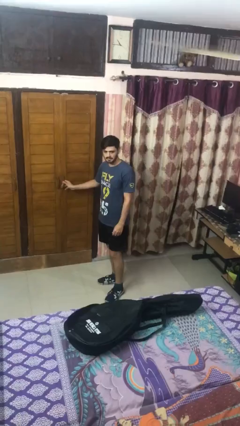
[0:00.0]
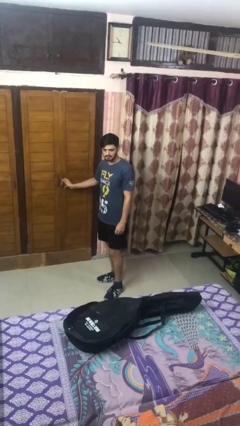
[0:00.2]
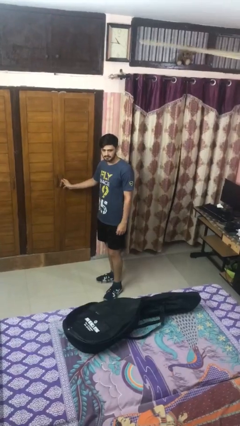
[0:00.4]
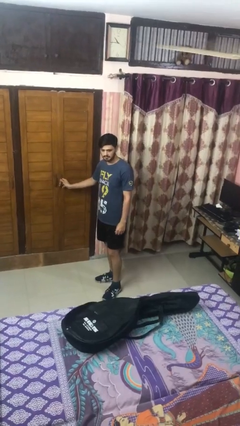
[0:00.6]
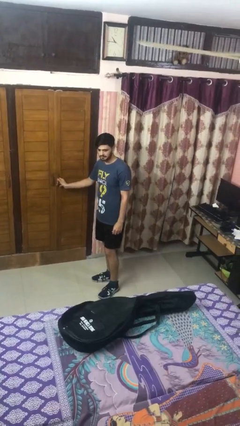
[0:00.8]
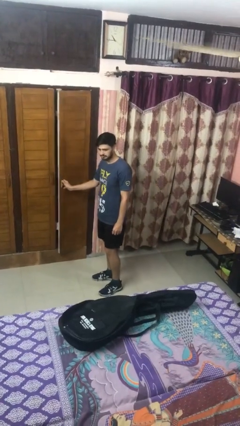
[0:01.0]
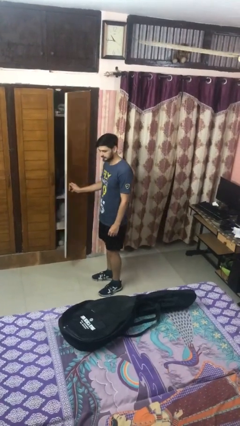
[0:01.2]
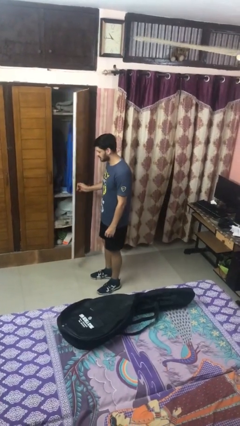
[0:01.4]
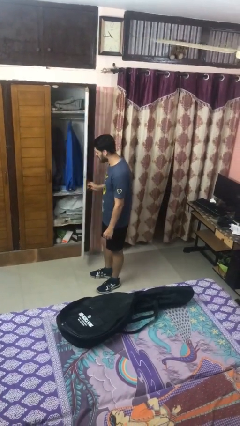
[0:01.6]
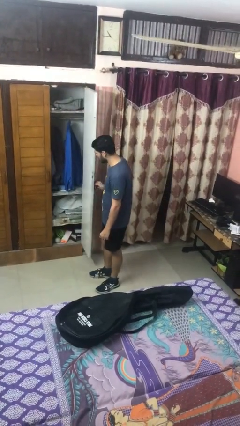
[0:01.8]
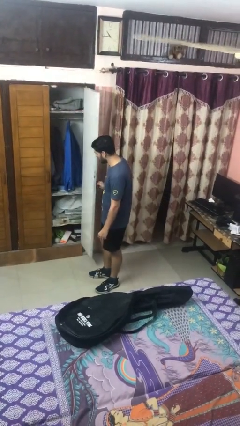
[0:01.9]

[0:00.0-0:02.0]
person opens closet door

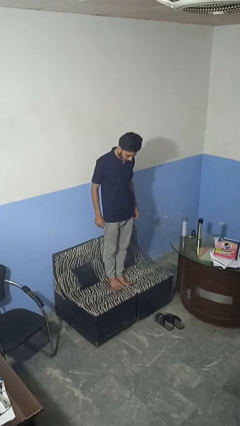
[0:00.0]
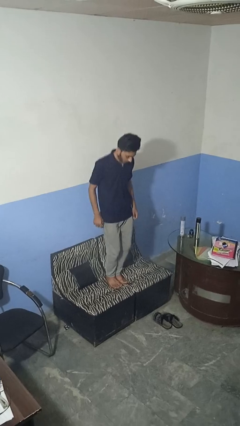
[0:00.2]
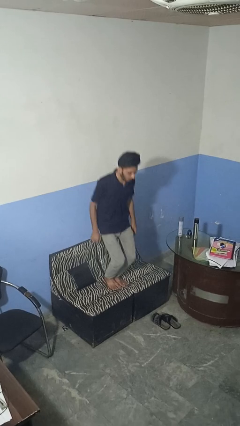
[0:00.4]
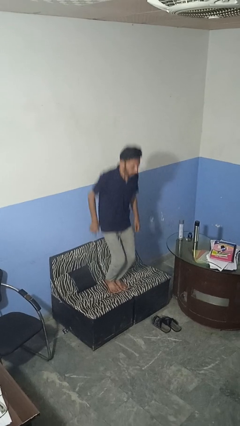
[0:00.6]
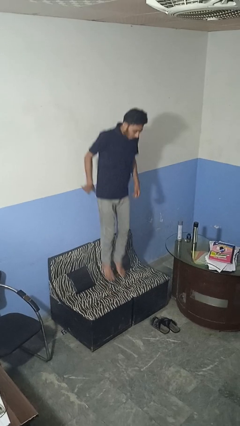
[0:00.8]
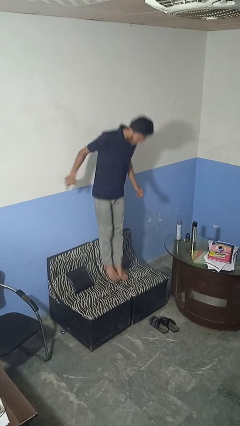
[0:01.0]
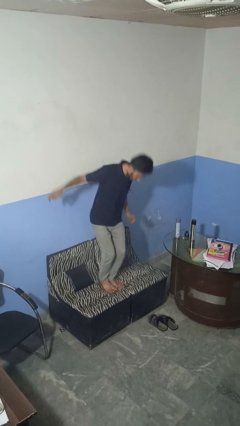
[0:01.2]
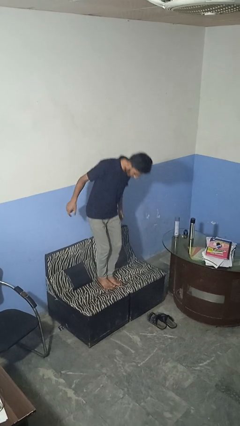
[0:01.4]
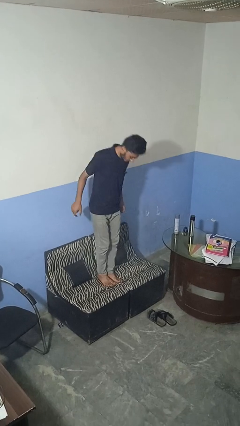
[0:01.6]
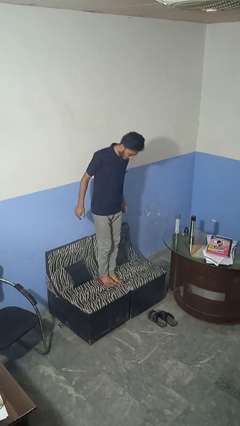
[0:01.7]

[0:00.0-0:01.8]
person jumps on couch

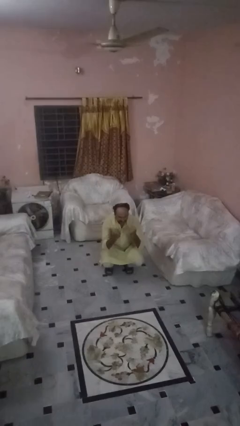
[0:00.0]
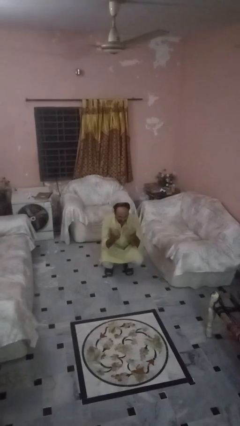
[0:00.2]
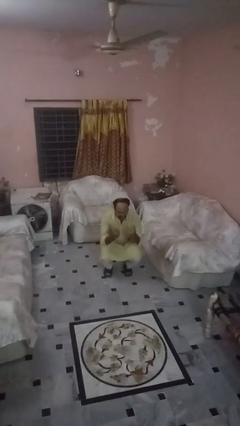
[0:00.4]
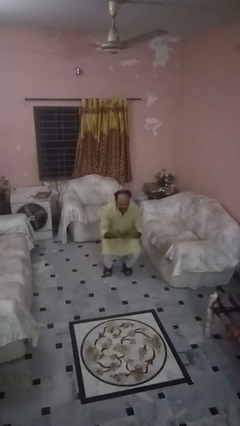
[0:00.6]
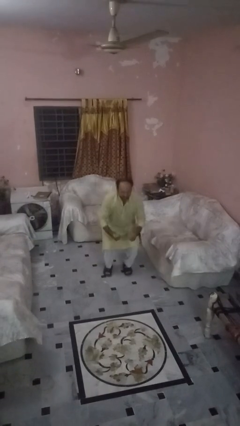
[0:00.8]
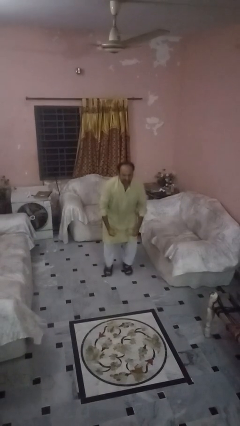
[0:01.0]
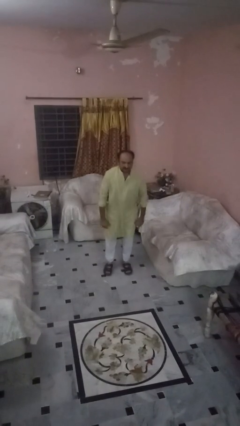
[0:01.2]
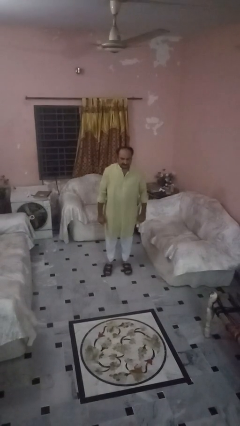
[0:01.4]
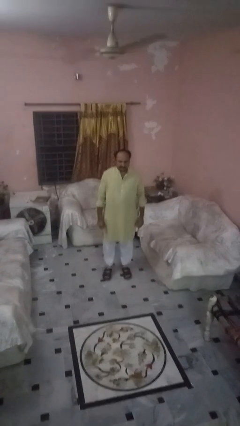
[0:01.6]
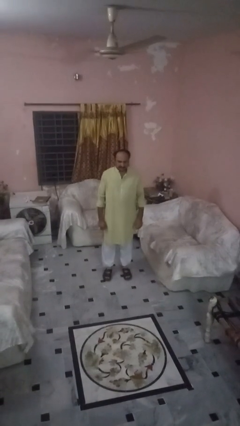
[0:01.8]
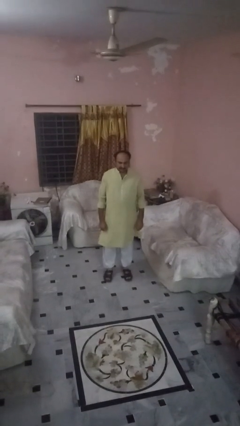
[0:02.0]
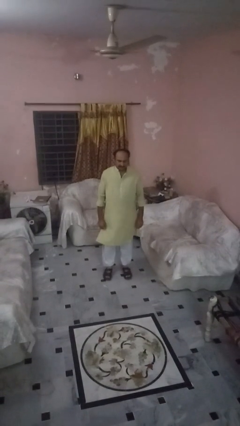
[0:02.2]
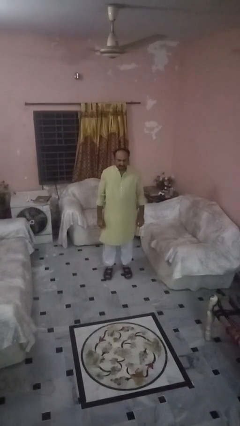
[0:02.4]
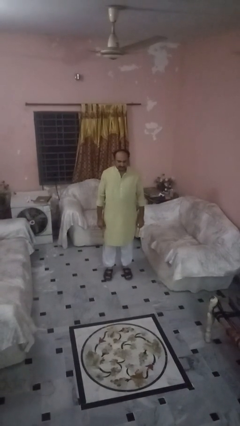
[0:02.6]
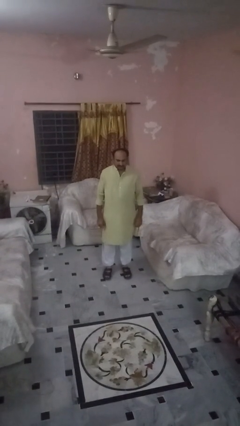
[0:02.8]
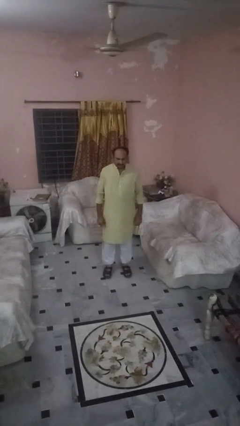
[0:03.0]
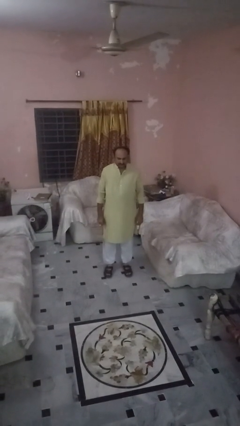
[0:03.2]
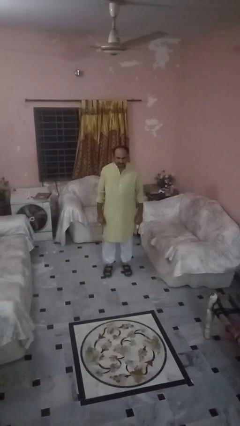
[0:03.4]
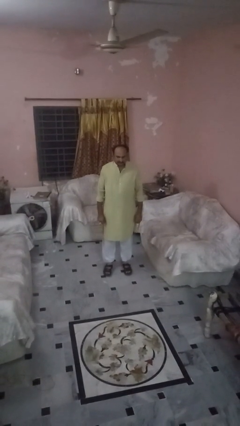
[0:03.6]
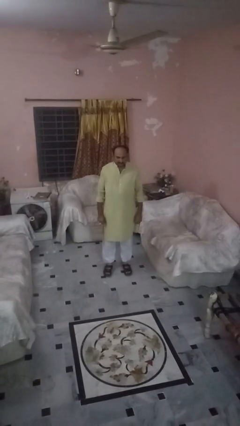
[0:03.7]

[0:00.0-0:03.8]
person stands up

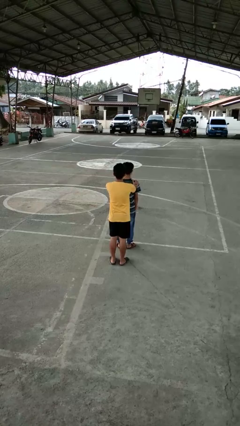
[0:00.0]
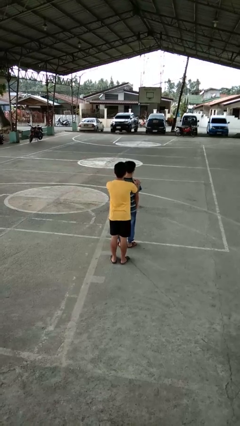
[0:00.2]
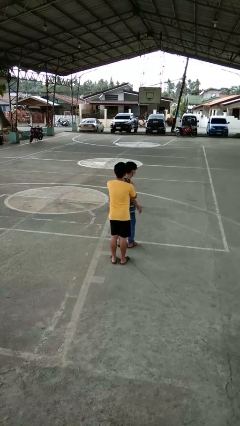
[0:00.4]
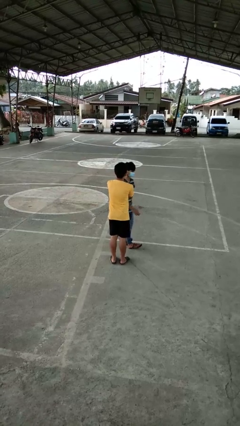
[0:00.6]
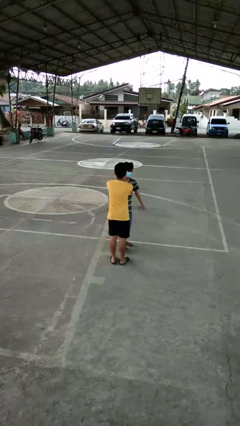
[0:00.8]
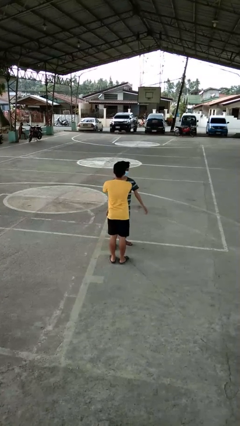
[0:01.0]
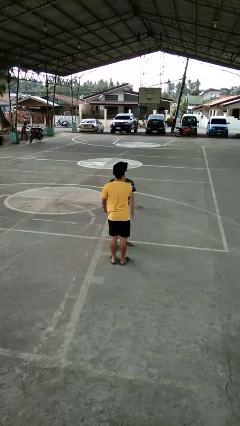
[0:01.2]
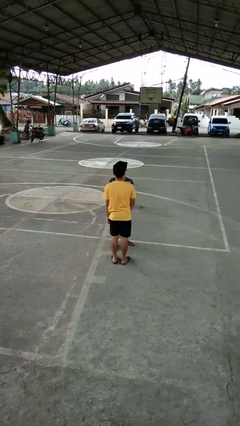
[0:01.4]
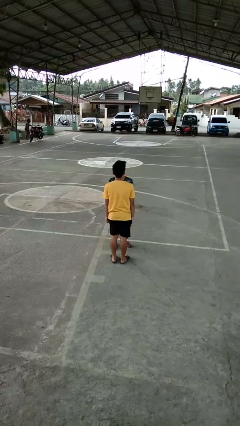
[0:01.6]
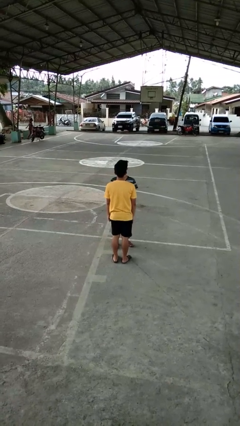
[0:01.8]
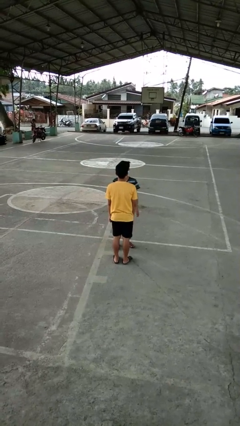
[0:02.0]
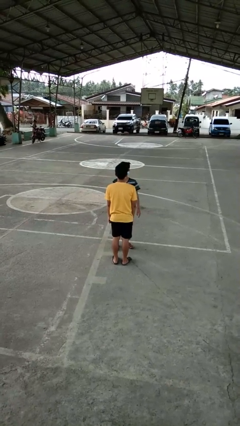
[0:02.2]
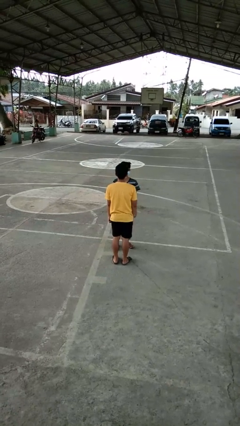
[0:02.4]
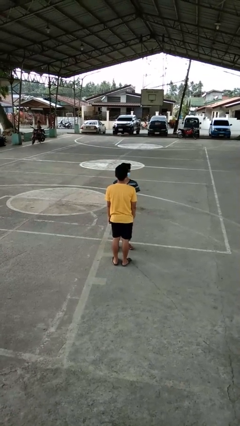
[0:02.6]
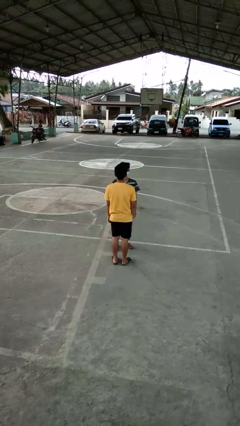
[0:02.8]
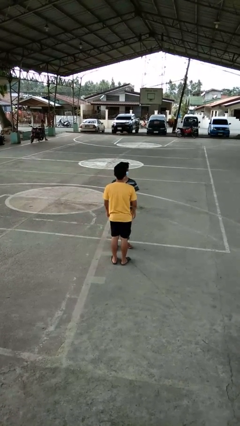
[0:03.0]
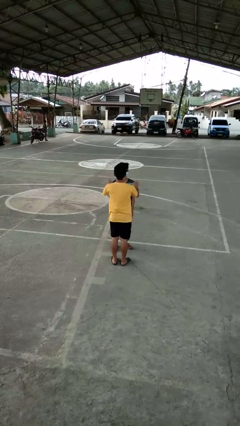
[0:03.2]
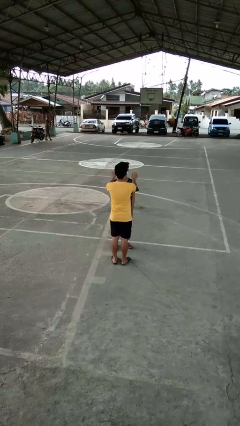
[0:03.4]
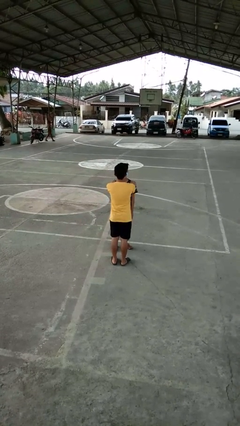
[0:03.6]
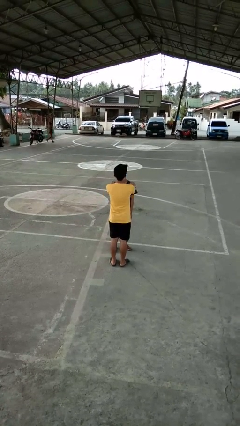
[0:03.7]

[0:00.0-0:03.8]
person spins person around

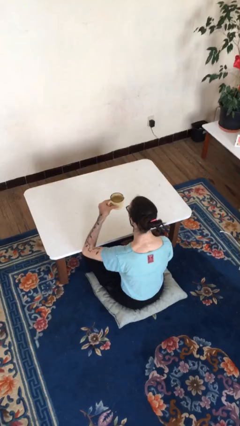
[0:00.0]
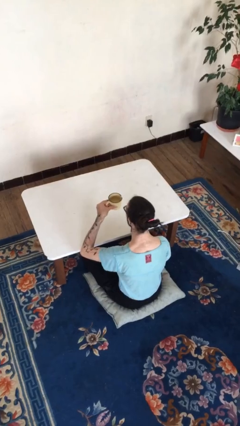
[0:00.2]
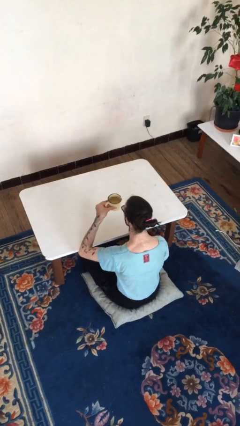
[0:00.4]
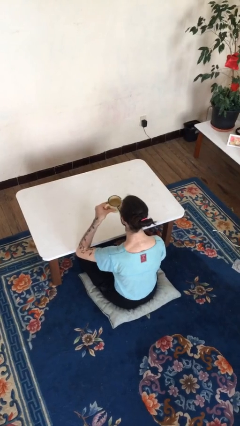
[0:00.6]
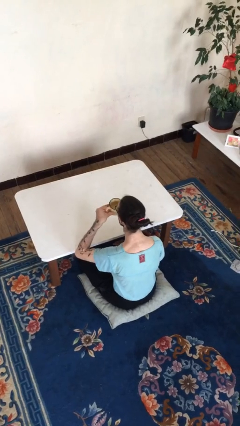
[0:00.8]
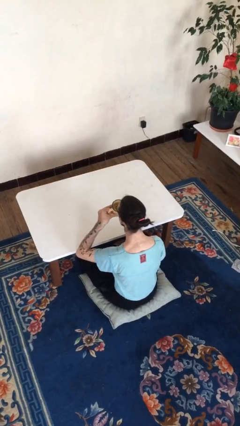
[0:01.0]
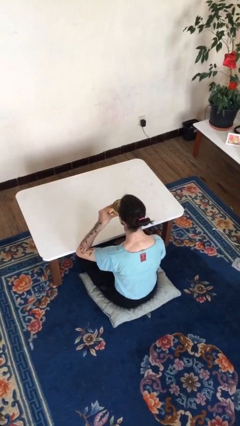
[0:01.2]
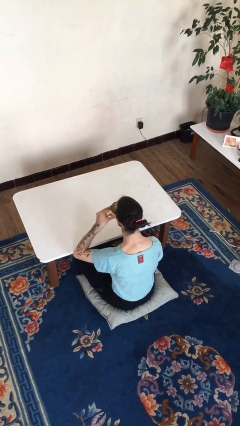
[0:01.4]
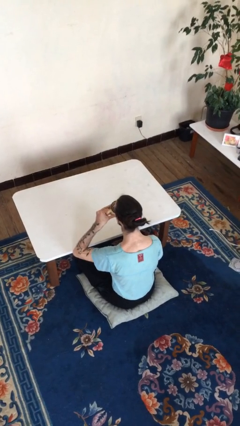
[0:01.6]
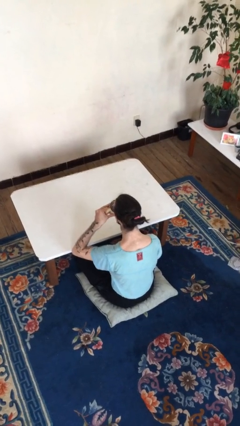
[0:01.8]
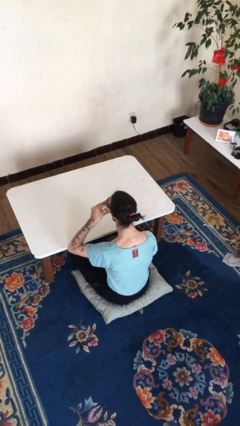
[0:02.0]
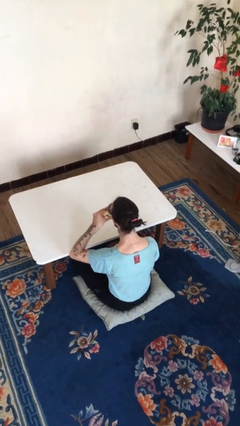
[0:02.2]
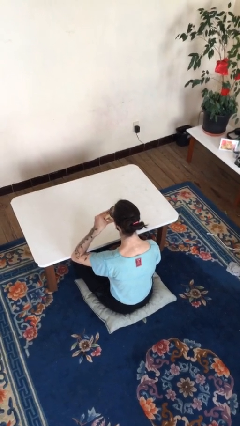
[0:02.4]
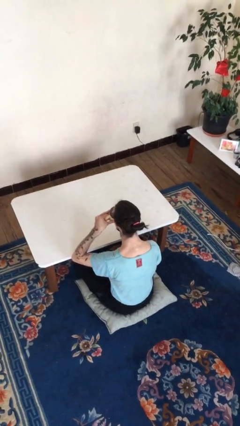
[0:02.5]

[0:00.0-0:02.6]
person drinks from mug

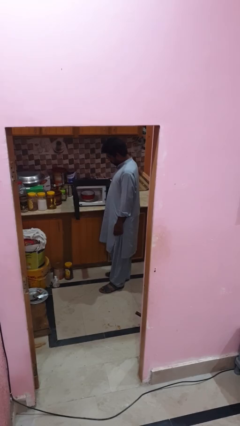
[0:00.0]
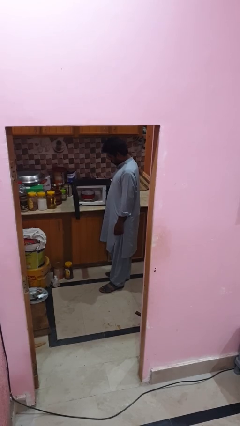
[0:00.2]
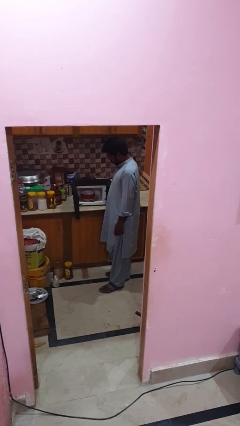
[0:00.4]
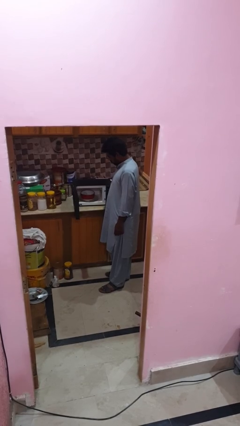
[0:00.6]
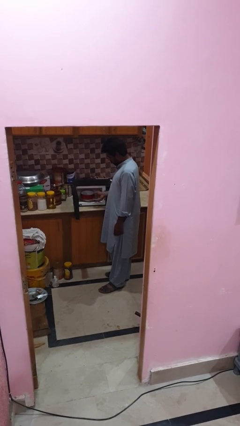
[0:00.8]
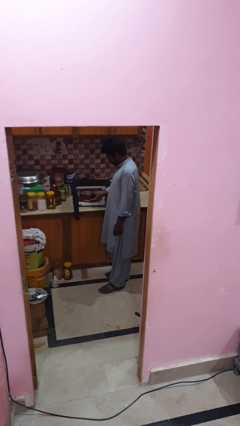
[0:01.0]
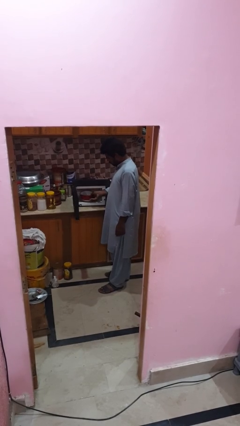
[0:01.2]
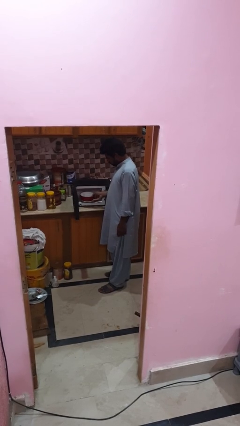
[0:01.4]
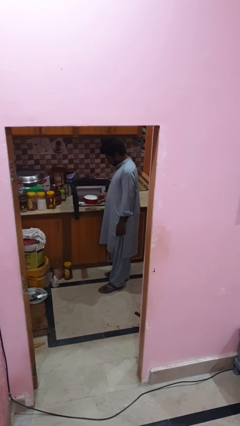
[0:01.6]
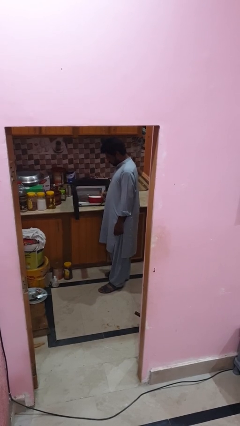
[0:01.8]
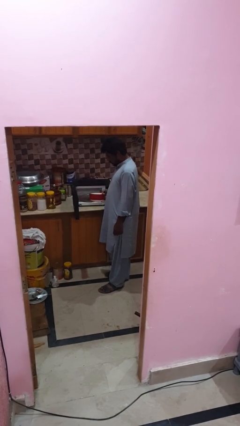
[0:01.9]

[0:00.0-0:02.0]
person takes object from microwave

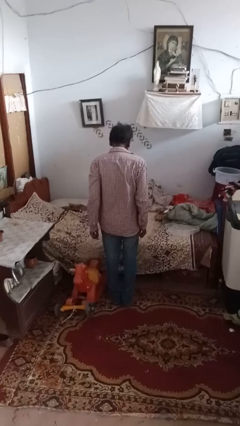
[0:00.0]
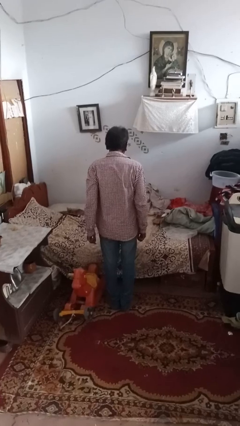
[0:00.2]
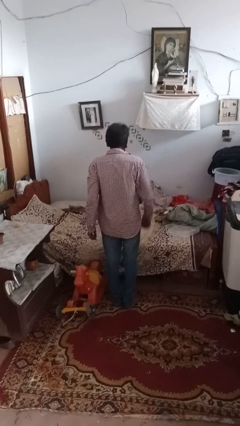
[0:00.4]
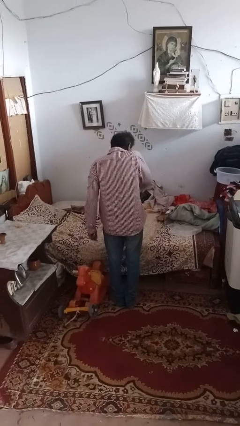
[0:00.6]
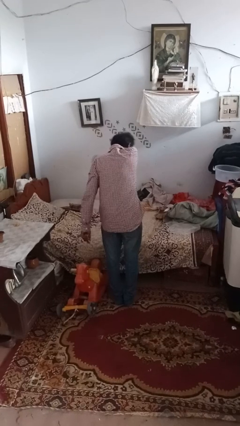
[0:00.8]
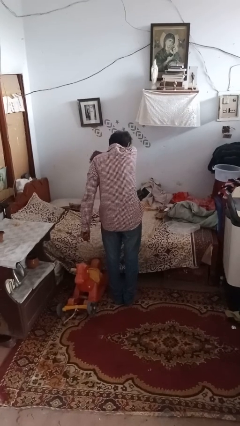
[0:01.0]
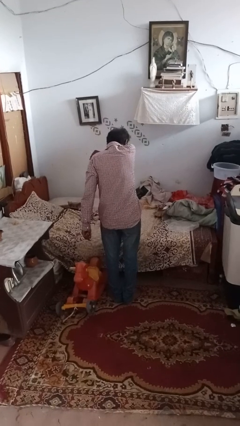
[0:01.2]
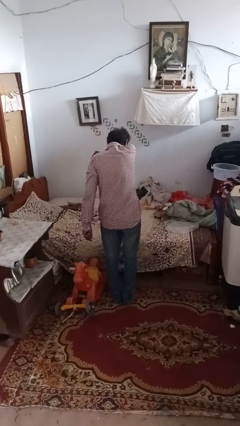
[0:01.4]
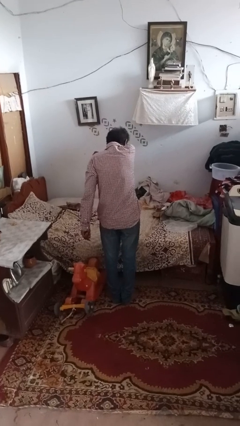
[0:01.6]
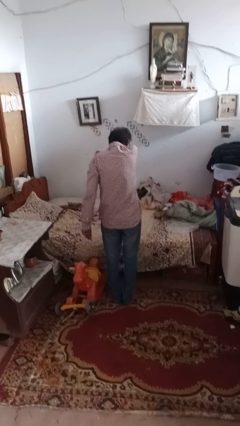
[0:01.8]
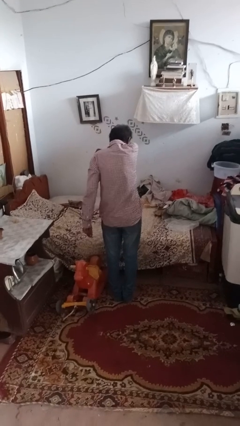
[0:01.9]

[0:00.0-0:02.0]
person sneezes into hand
